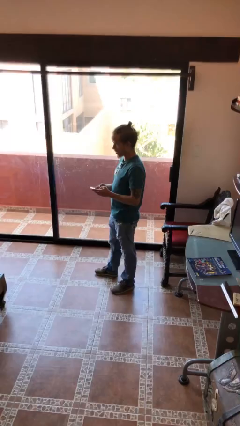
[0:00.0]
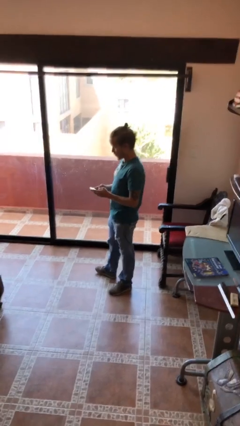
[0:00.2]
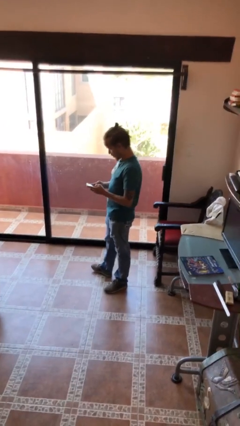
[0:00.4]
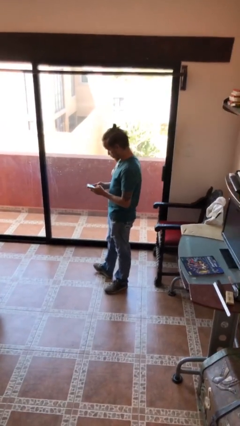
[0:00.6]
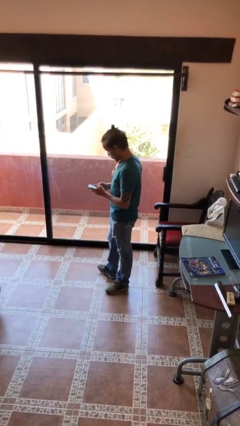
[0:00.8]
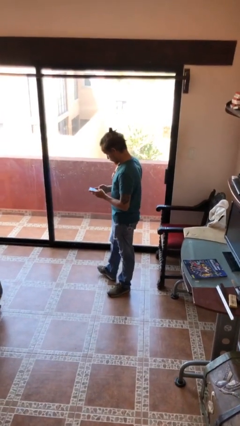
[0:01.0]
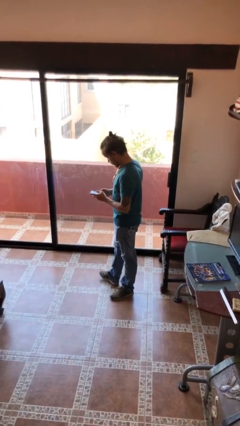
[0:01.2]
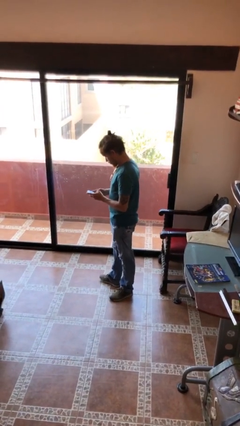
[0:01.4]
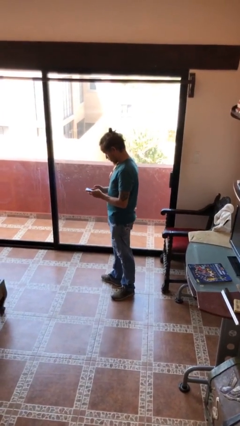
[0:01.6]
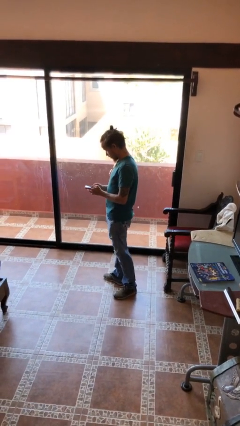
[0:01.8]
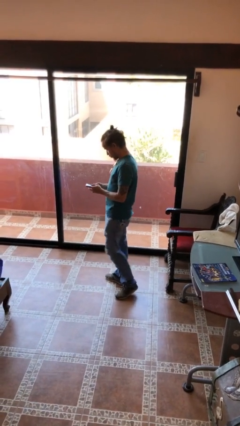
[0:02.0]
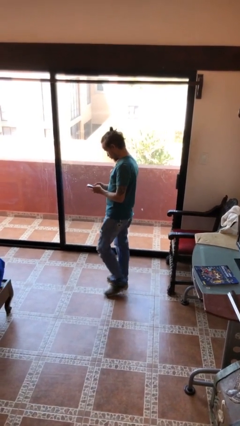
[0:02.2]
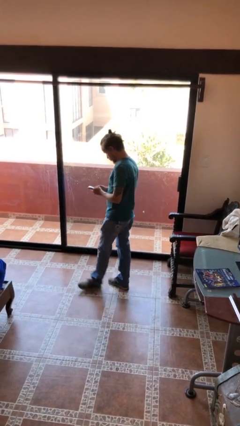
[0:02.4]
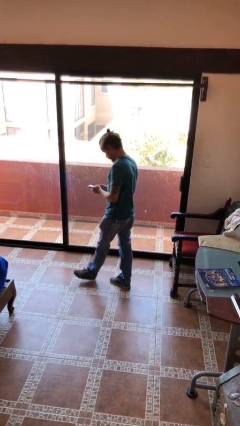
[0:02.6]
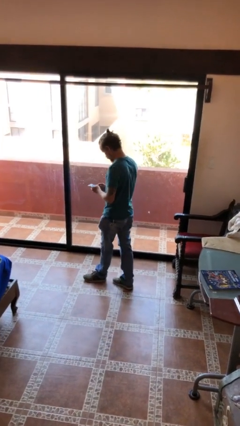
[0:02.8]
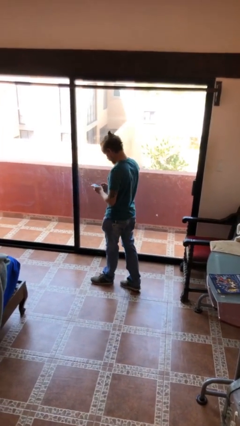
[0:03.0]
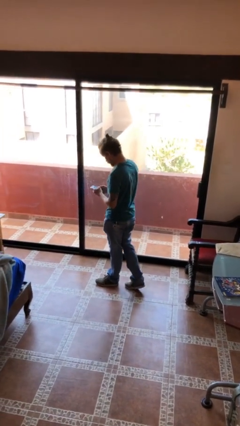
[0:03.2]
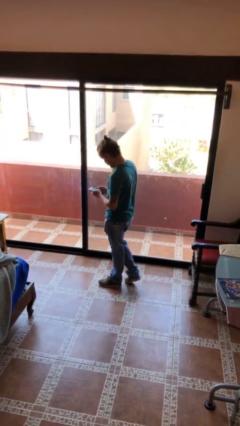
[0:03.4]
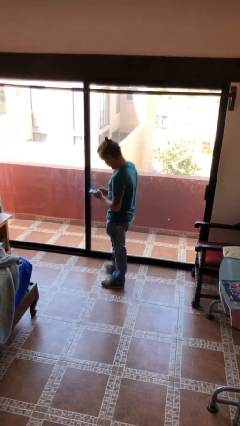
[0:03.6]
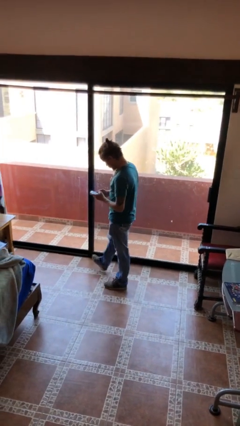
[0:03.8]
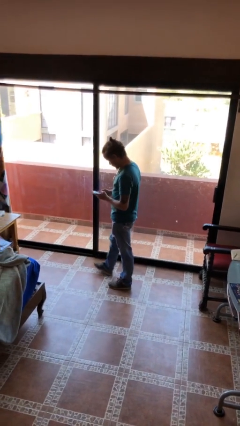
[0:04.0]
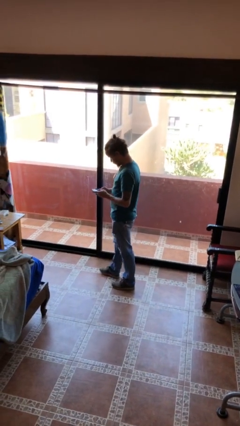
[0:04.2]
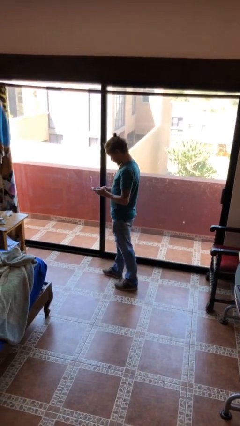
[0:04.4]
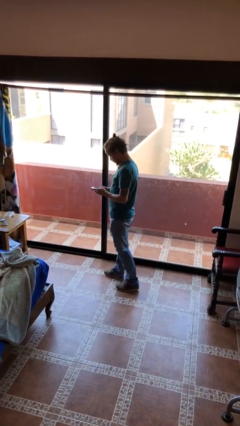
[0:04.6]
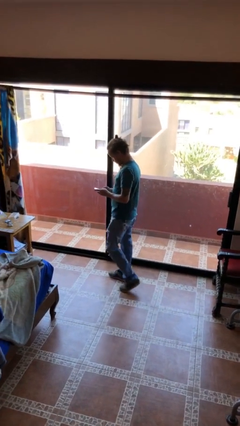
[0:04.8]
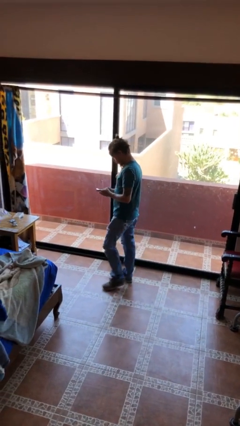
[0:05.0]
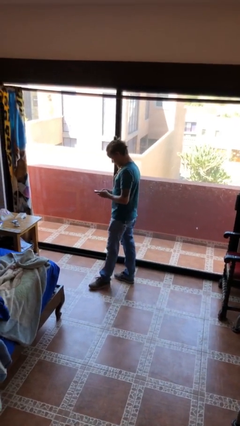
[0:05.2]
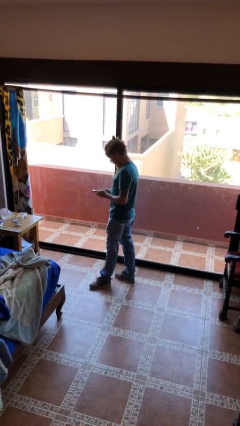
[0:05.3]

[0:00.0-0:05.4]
person texts on phone

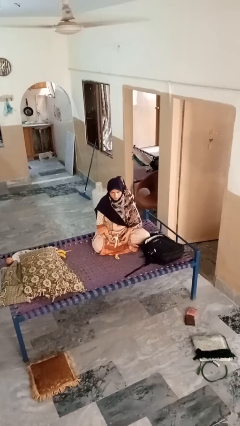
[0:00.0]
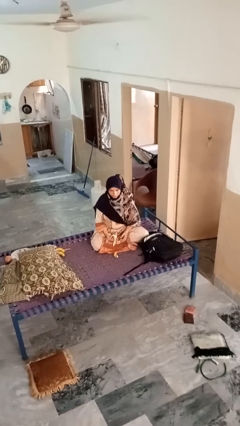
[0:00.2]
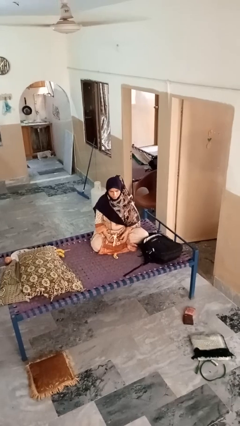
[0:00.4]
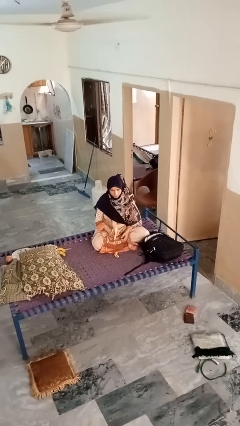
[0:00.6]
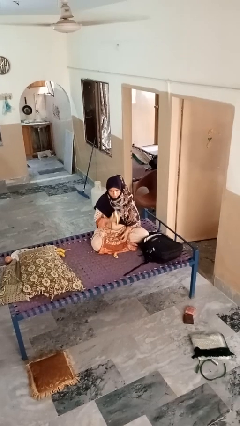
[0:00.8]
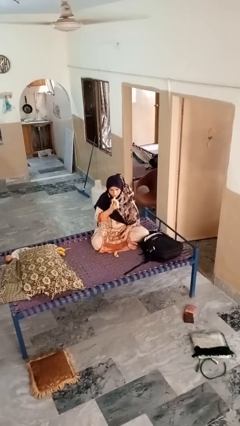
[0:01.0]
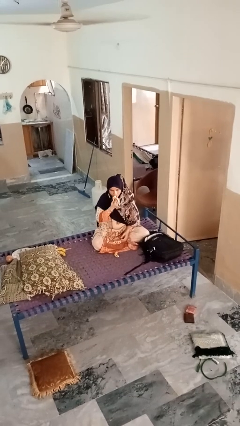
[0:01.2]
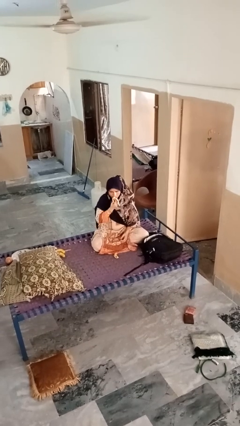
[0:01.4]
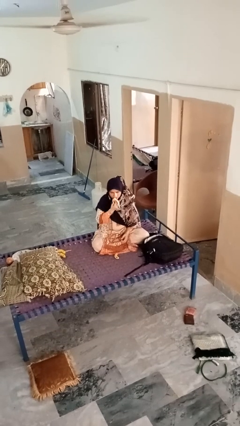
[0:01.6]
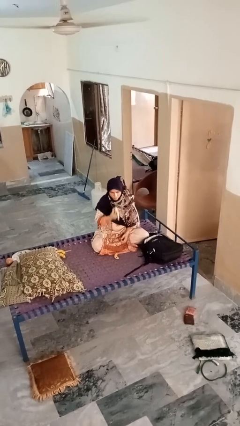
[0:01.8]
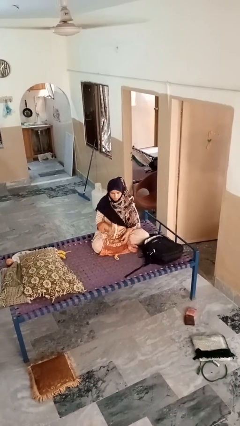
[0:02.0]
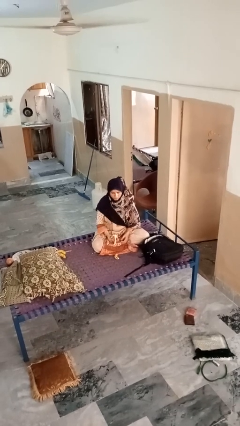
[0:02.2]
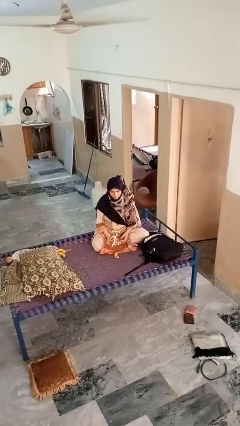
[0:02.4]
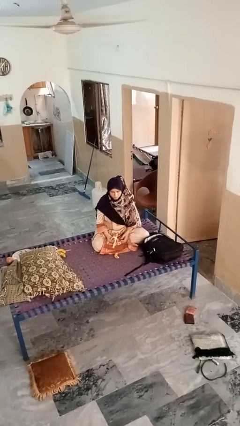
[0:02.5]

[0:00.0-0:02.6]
person eats banana

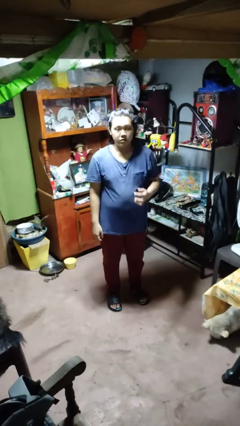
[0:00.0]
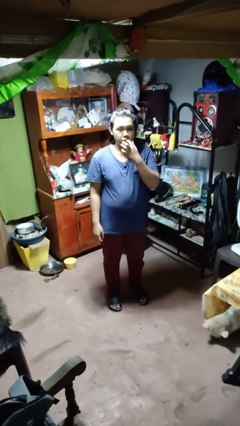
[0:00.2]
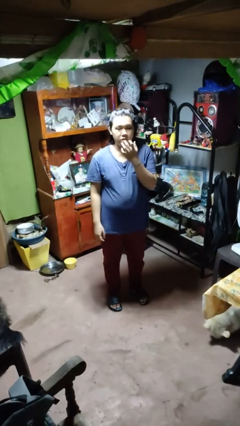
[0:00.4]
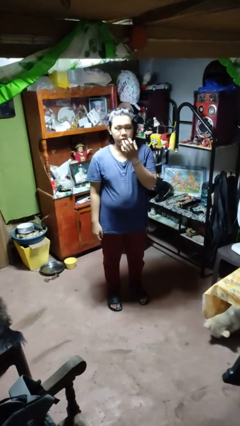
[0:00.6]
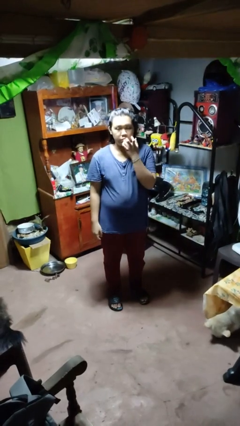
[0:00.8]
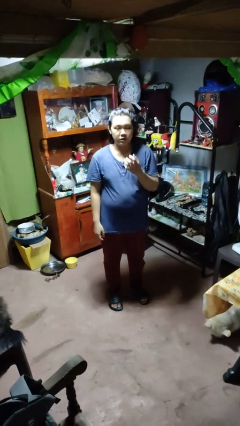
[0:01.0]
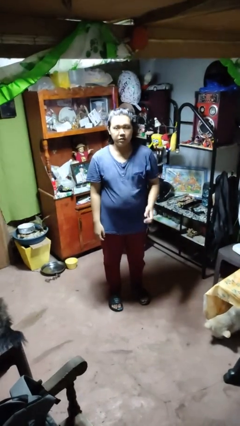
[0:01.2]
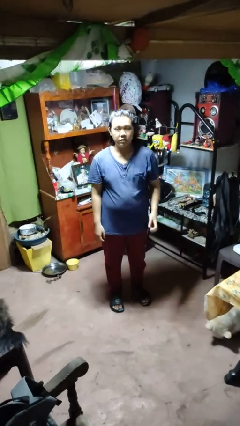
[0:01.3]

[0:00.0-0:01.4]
person licks fingers

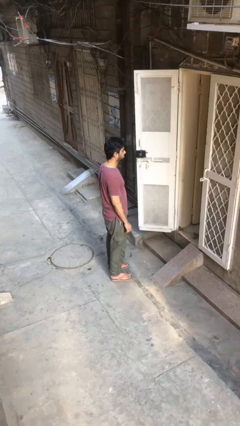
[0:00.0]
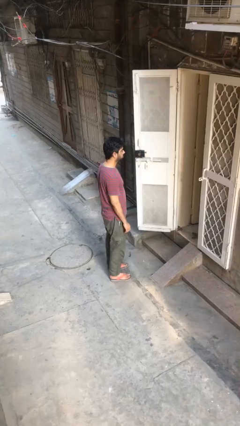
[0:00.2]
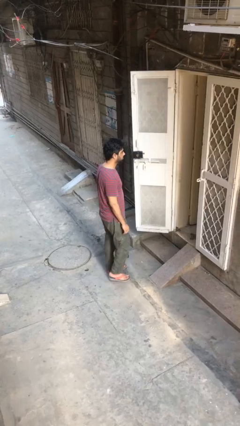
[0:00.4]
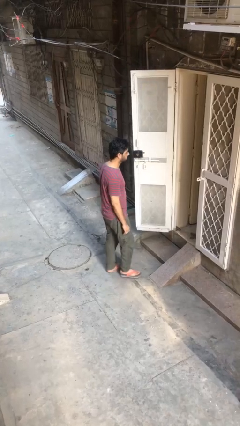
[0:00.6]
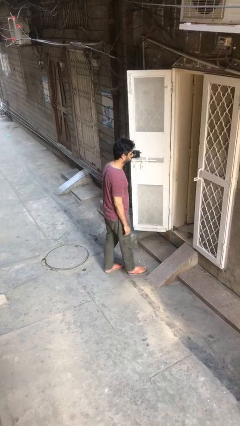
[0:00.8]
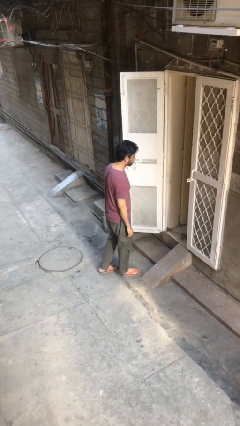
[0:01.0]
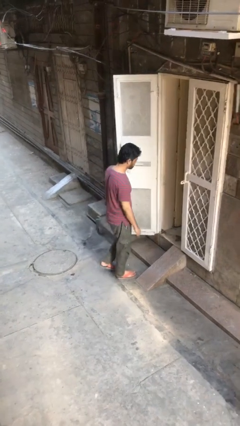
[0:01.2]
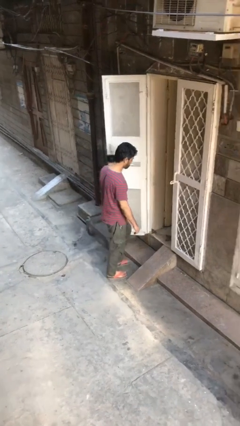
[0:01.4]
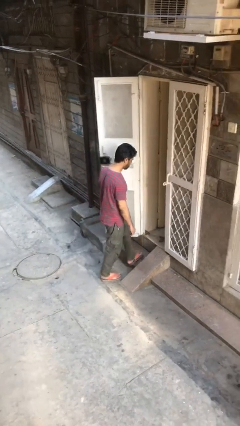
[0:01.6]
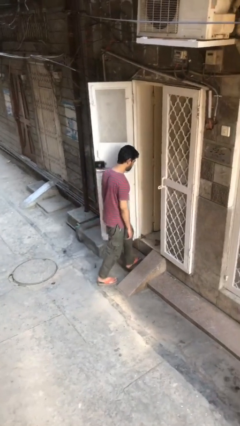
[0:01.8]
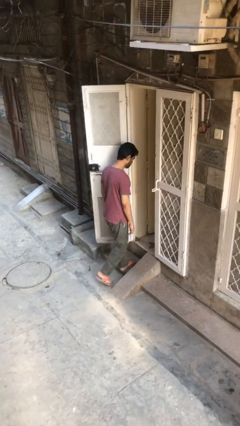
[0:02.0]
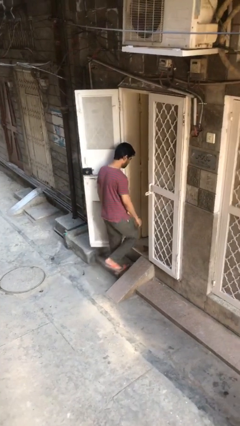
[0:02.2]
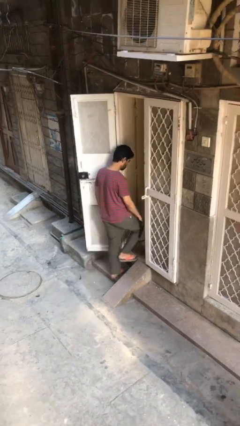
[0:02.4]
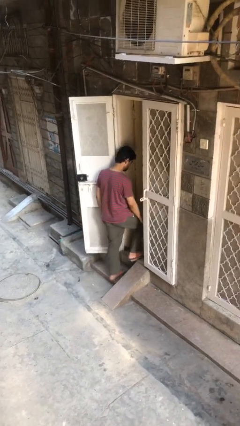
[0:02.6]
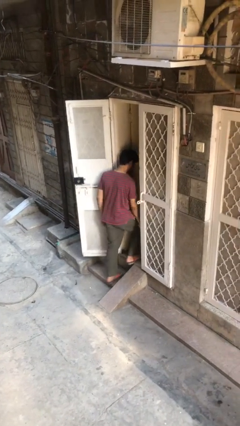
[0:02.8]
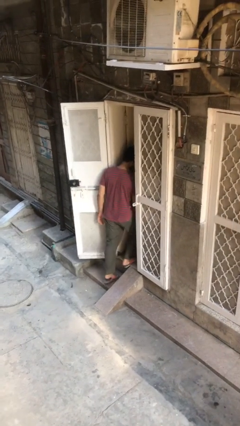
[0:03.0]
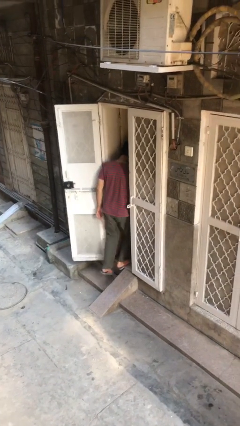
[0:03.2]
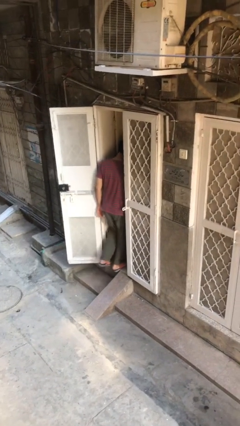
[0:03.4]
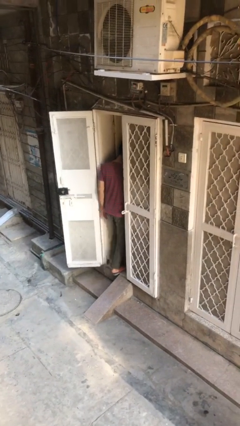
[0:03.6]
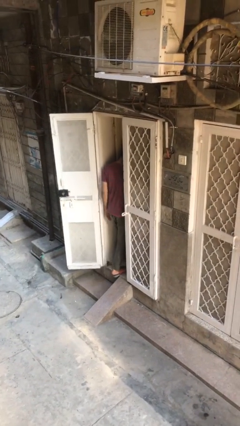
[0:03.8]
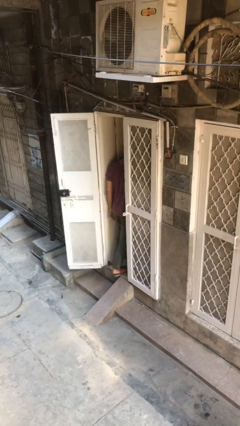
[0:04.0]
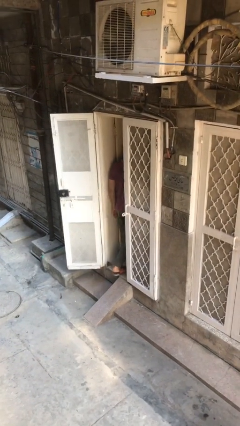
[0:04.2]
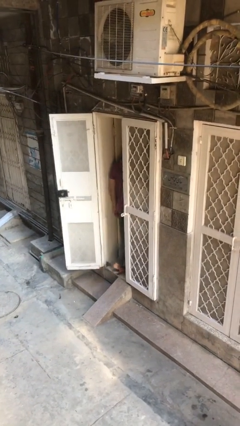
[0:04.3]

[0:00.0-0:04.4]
person exits scene through structure

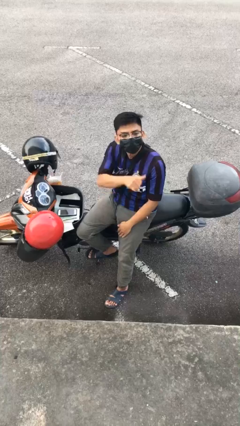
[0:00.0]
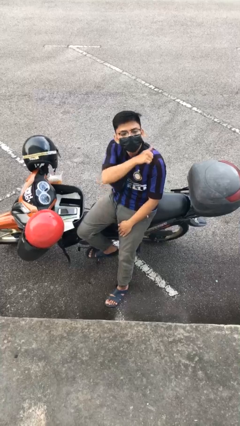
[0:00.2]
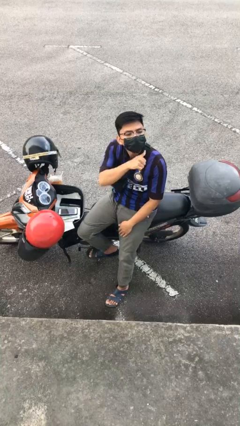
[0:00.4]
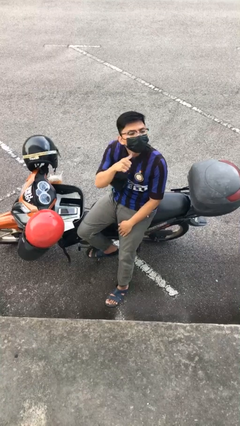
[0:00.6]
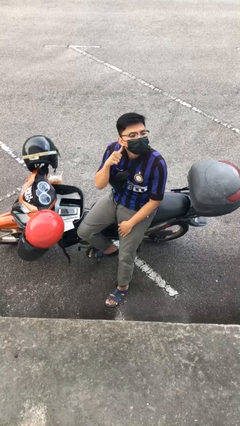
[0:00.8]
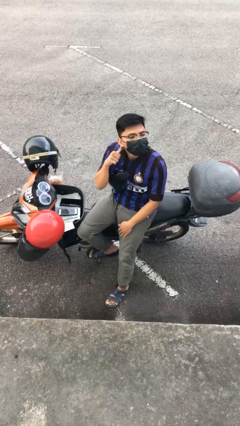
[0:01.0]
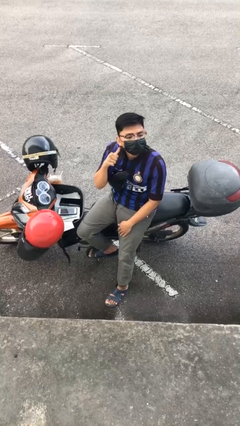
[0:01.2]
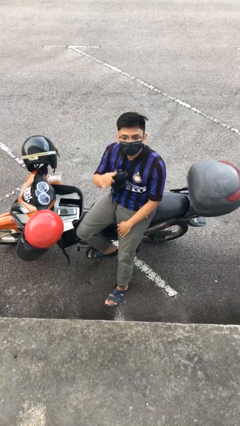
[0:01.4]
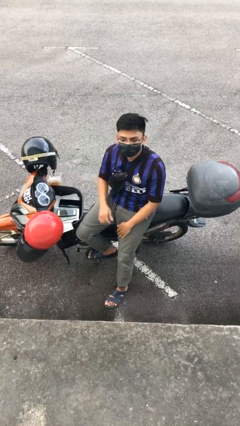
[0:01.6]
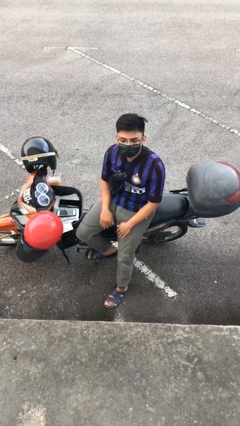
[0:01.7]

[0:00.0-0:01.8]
person gestures cut

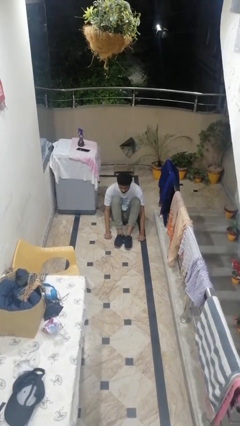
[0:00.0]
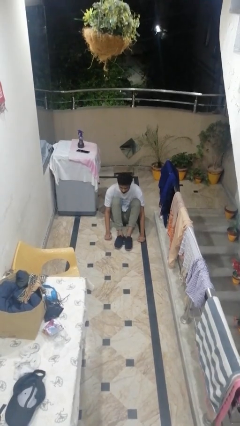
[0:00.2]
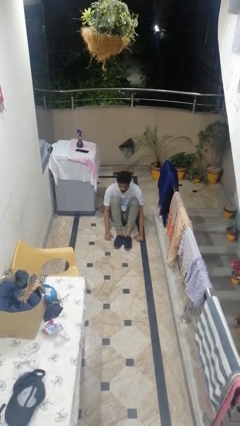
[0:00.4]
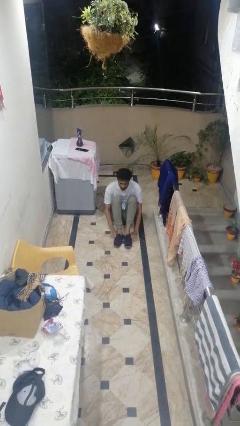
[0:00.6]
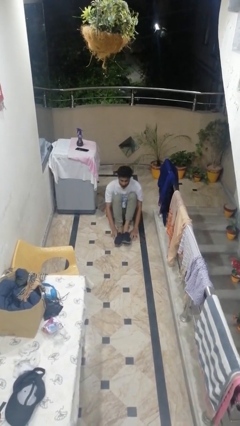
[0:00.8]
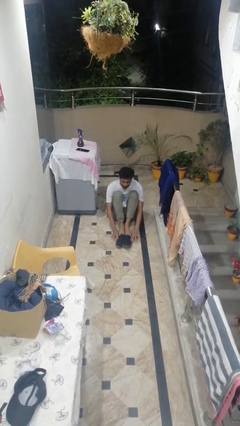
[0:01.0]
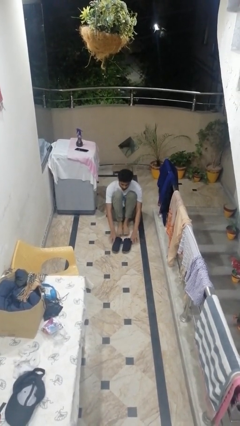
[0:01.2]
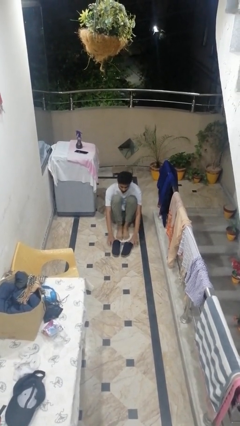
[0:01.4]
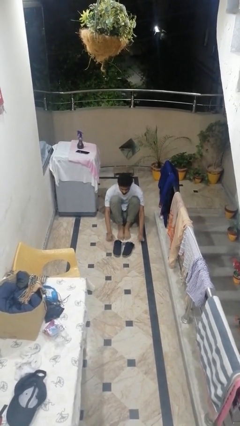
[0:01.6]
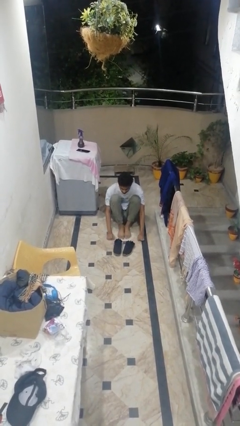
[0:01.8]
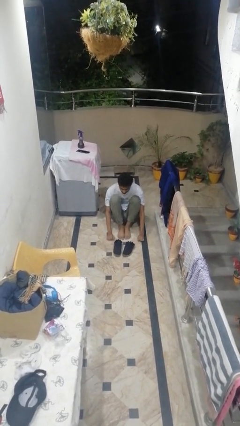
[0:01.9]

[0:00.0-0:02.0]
person takes off shoes
